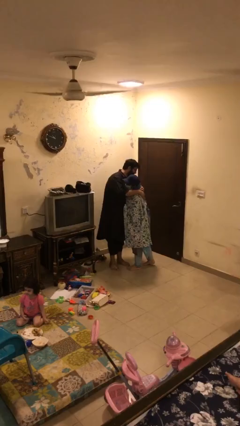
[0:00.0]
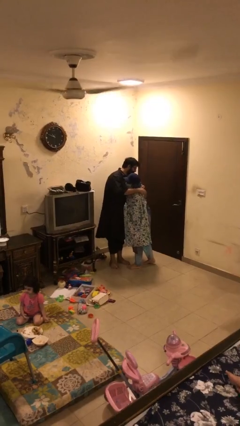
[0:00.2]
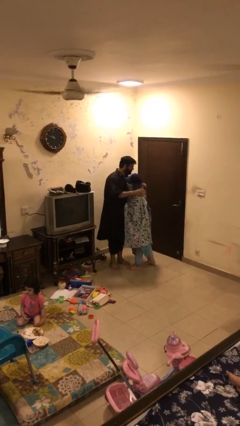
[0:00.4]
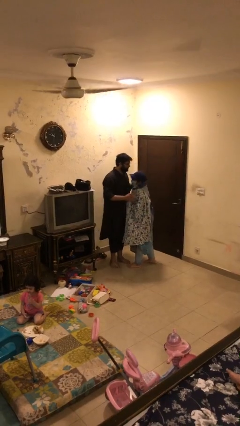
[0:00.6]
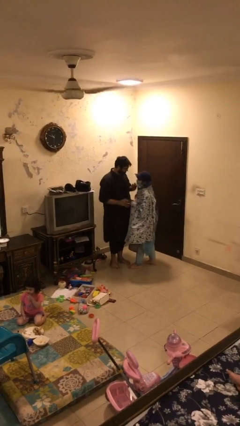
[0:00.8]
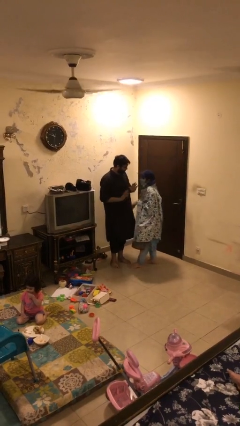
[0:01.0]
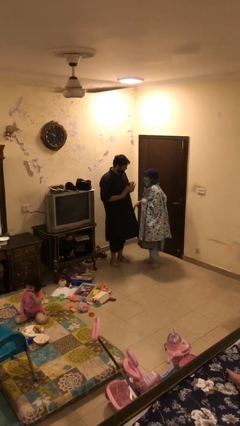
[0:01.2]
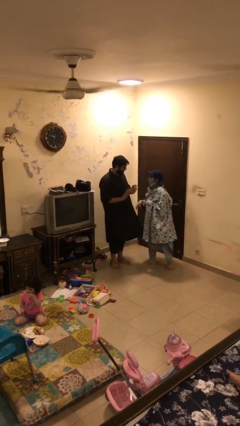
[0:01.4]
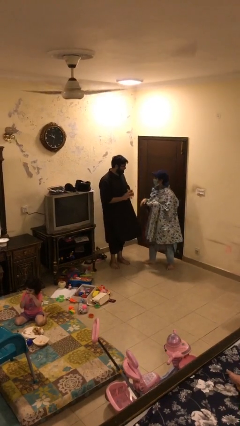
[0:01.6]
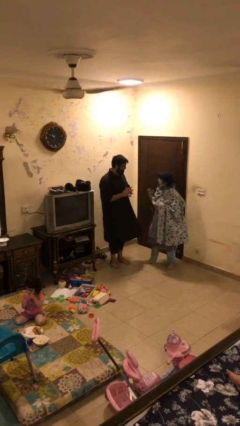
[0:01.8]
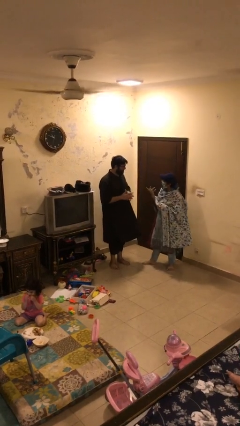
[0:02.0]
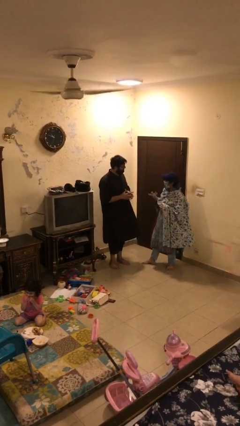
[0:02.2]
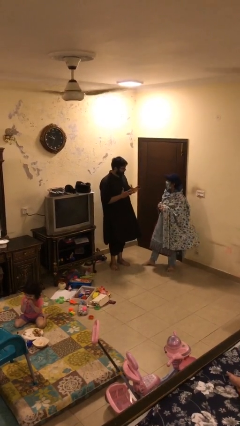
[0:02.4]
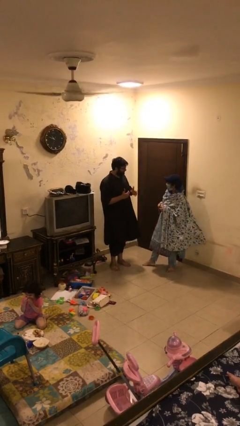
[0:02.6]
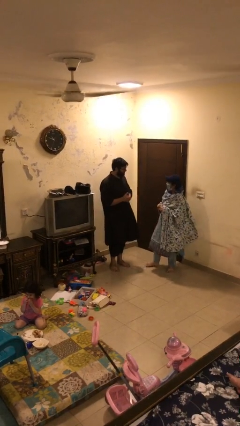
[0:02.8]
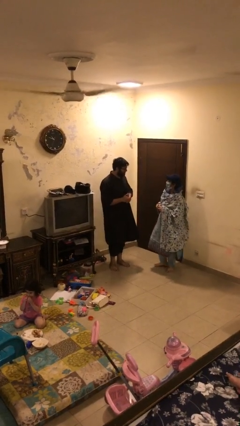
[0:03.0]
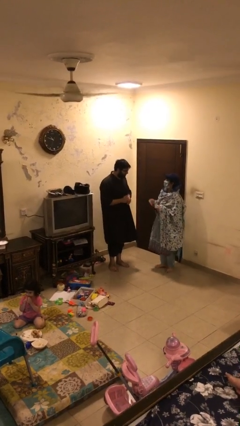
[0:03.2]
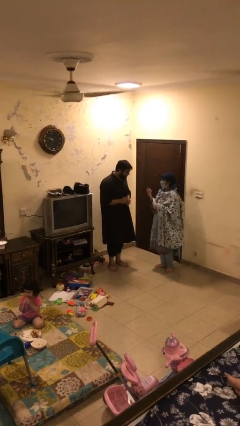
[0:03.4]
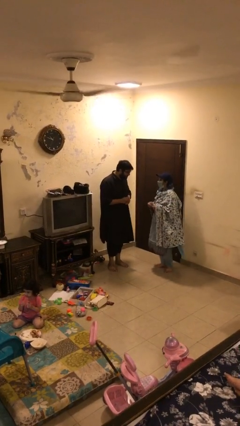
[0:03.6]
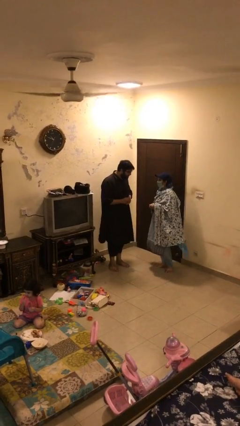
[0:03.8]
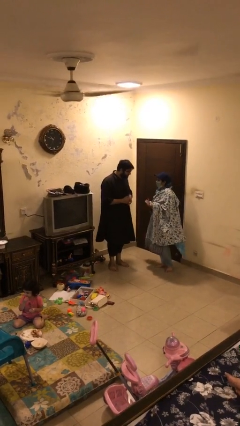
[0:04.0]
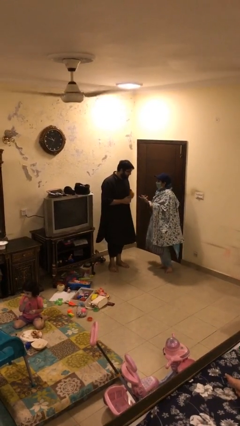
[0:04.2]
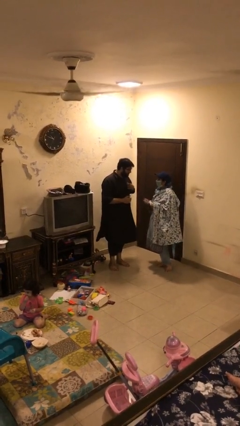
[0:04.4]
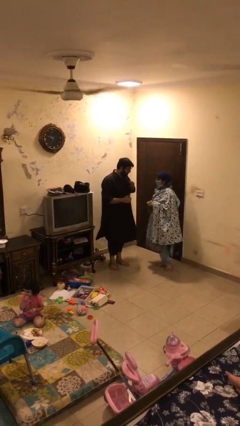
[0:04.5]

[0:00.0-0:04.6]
person talks to person

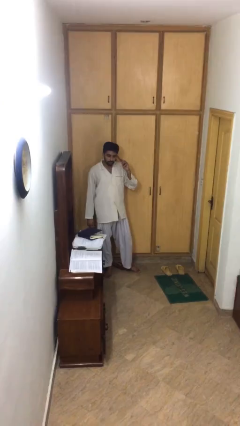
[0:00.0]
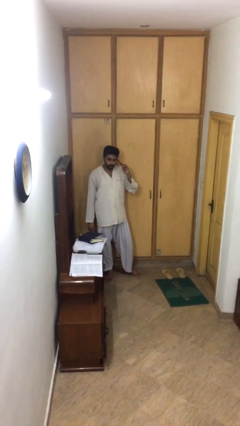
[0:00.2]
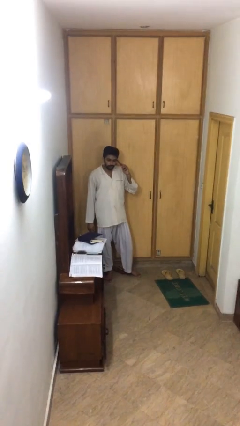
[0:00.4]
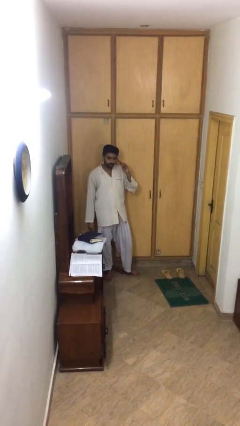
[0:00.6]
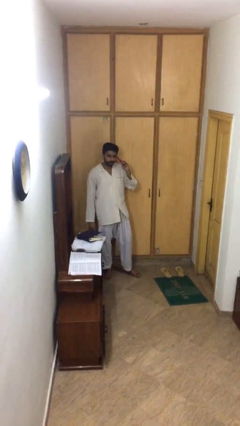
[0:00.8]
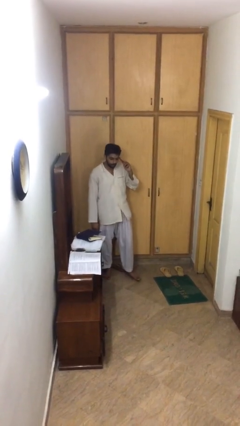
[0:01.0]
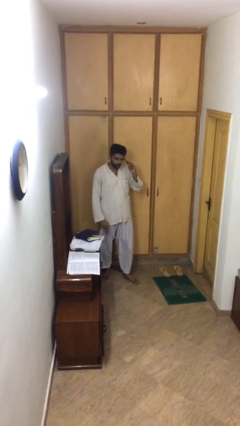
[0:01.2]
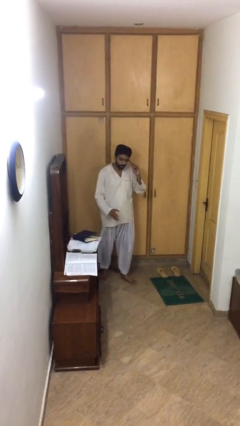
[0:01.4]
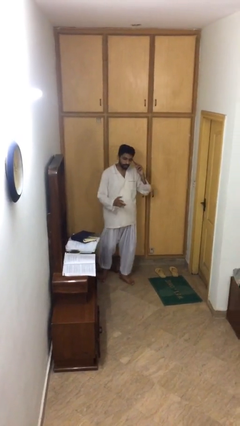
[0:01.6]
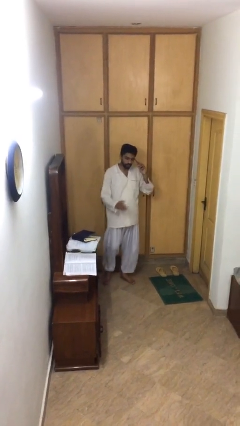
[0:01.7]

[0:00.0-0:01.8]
person talks on phone

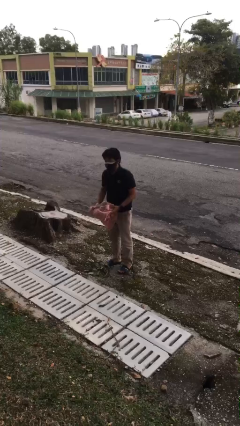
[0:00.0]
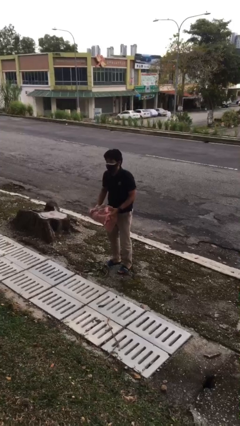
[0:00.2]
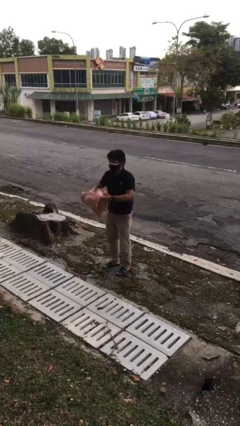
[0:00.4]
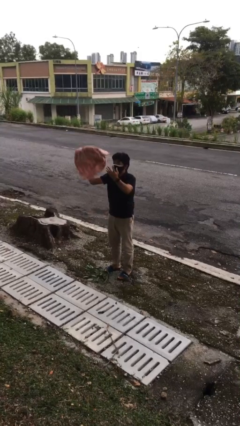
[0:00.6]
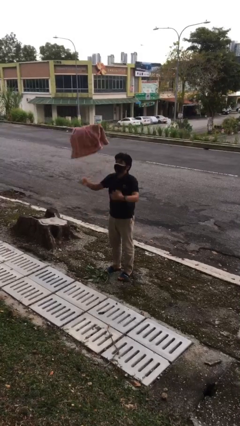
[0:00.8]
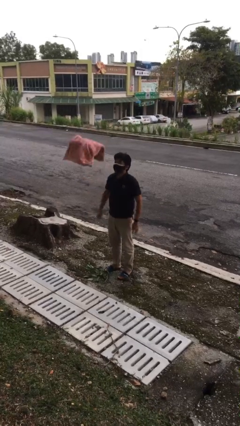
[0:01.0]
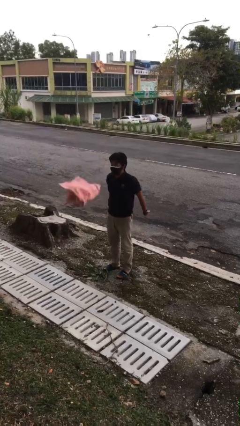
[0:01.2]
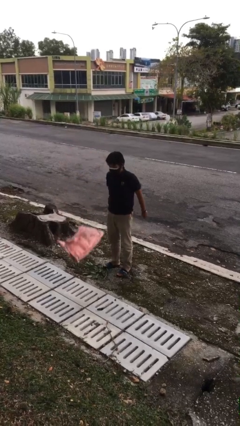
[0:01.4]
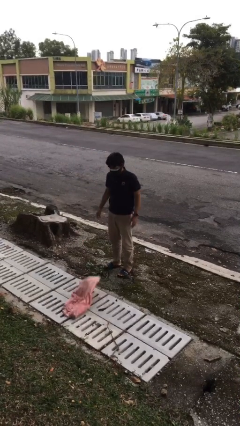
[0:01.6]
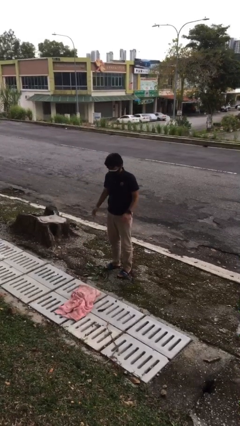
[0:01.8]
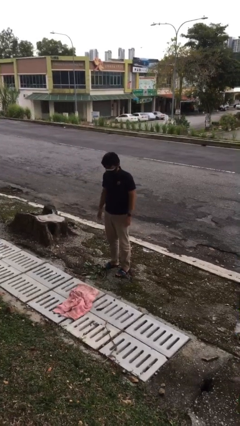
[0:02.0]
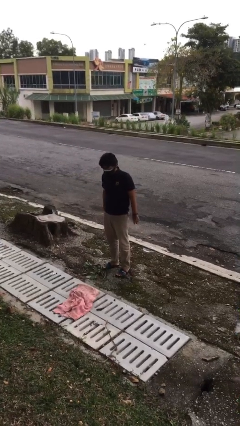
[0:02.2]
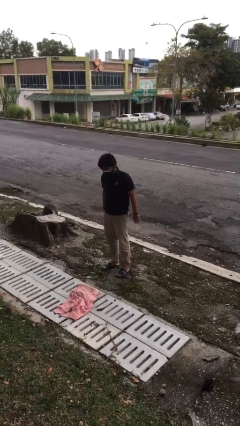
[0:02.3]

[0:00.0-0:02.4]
person throws object into air

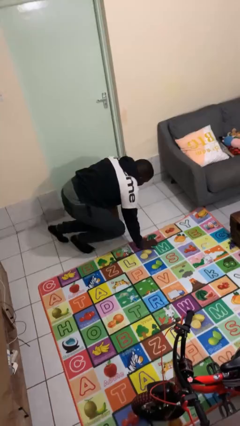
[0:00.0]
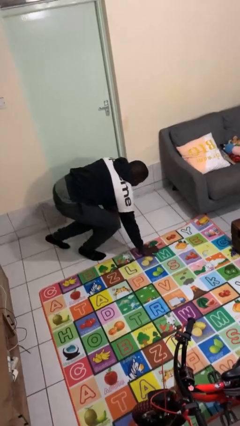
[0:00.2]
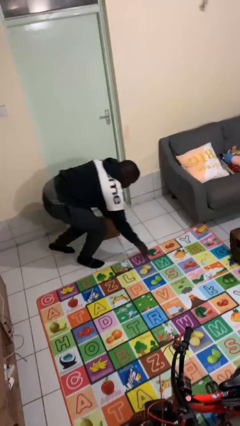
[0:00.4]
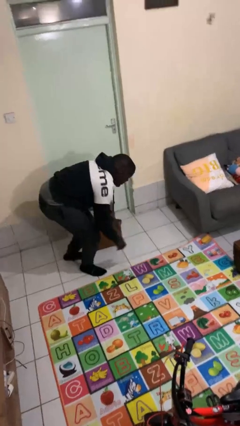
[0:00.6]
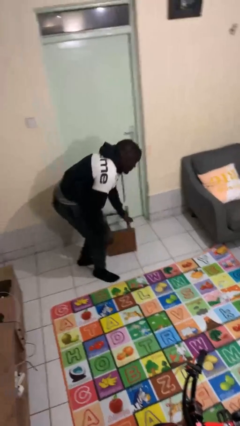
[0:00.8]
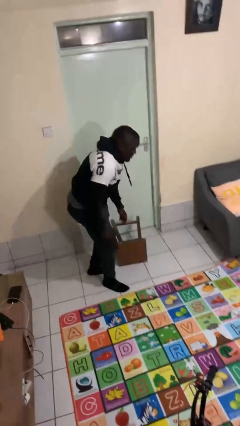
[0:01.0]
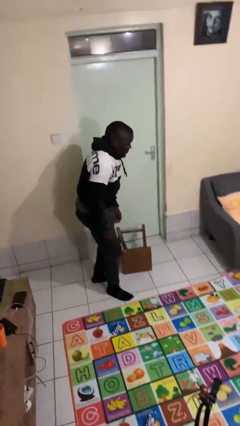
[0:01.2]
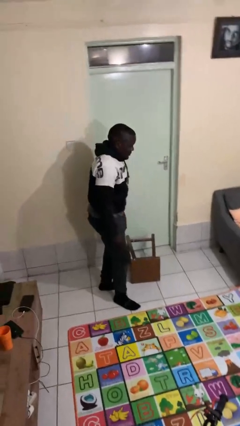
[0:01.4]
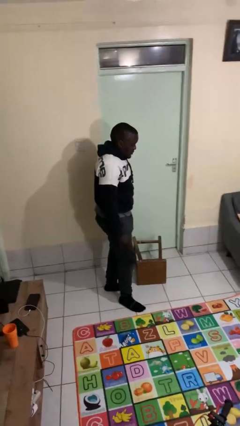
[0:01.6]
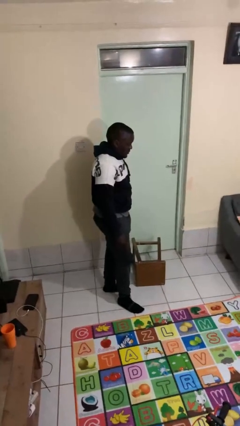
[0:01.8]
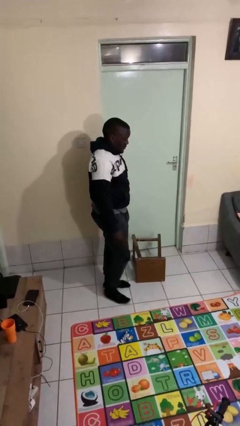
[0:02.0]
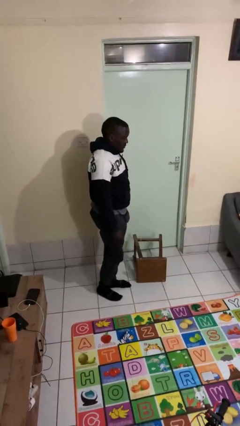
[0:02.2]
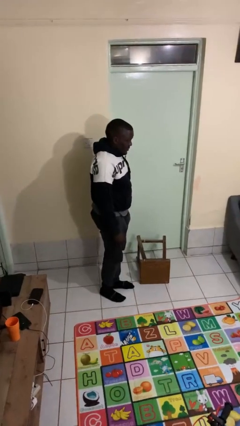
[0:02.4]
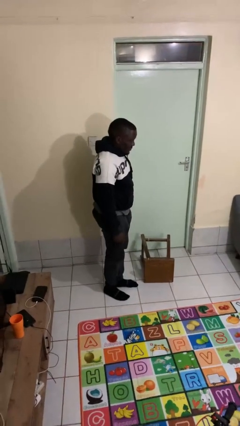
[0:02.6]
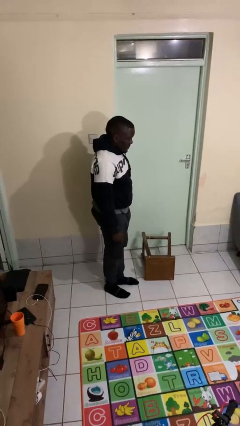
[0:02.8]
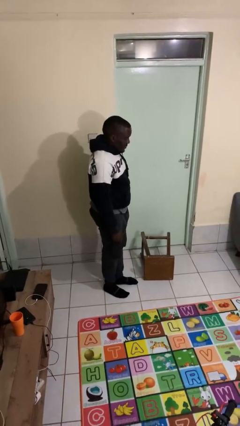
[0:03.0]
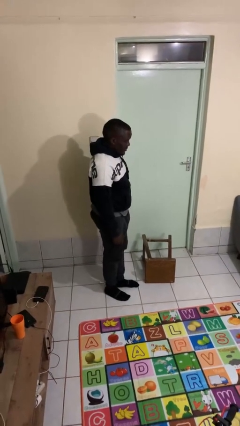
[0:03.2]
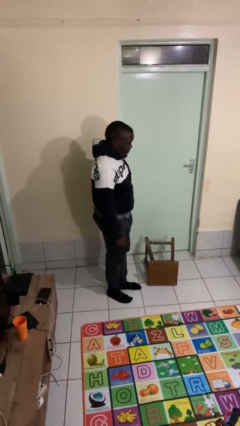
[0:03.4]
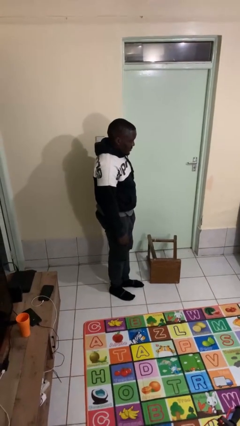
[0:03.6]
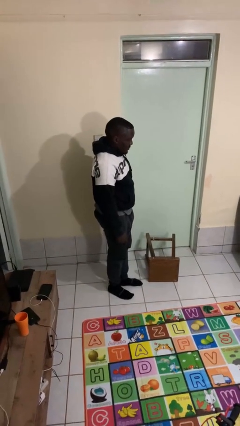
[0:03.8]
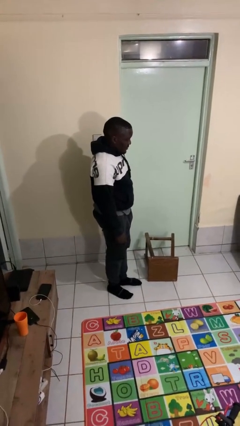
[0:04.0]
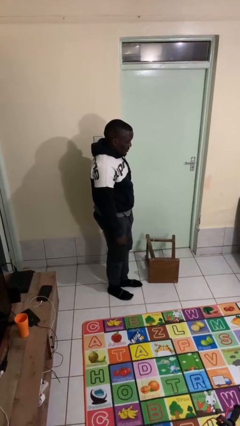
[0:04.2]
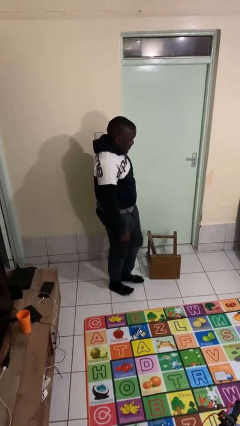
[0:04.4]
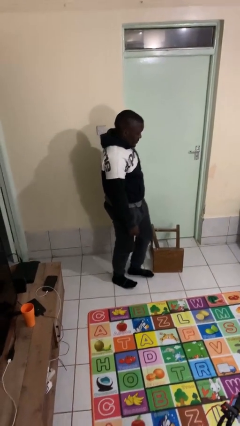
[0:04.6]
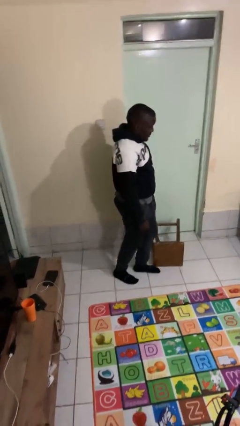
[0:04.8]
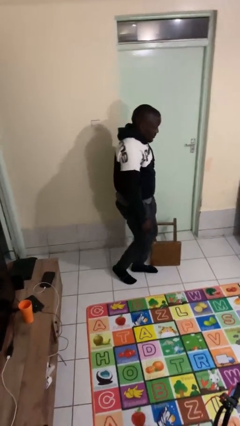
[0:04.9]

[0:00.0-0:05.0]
person stands up from floor

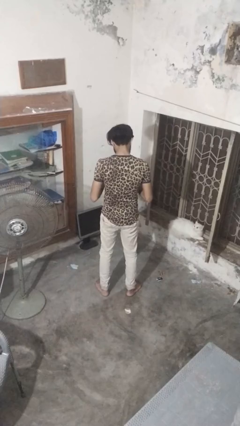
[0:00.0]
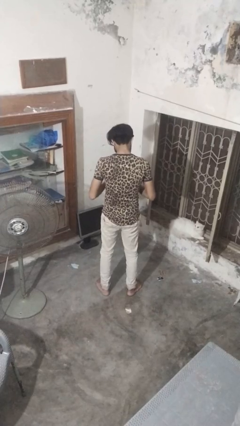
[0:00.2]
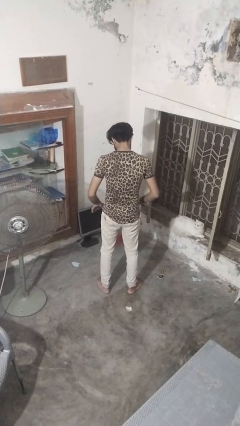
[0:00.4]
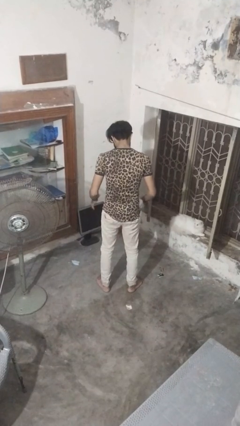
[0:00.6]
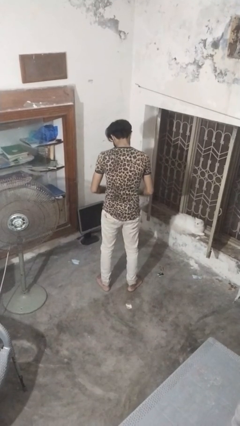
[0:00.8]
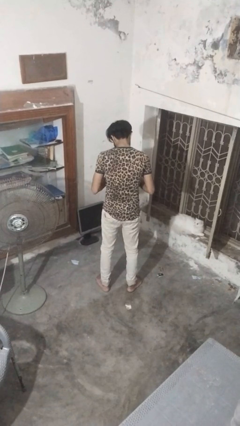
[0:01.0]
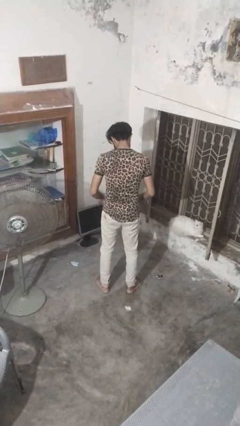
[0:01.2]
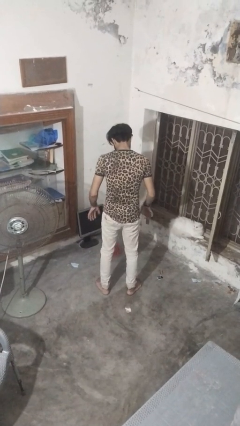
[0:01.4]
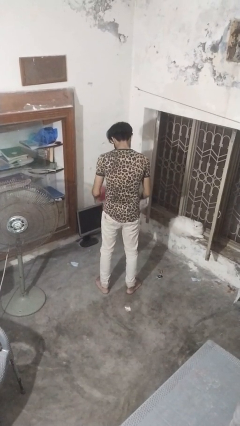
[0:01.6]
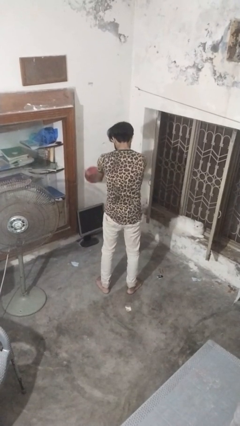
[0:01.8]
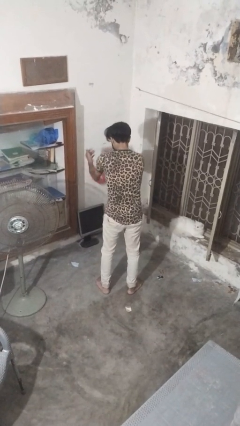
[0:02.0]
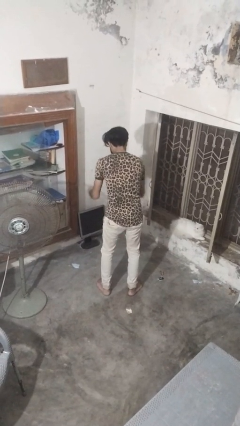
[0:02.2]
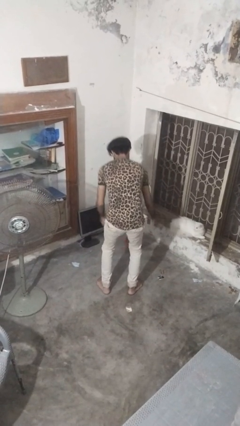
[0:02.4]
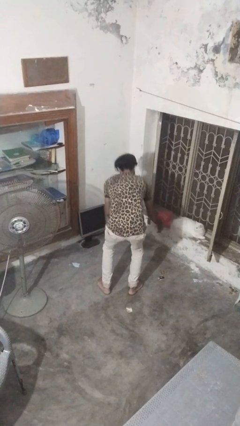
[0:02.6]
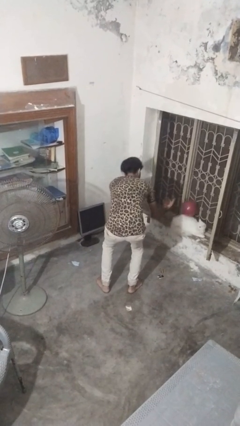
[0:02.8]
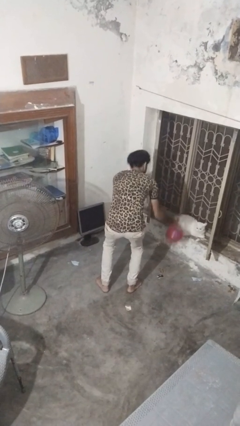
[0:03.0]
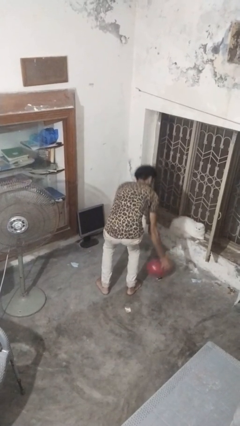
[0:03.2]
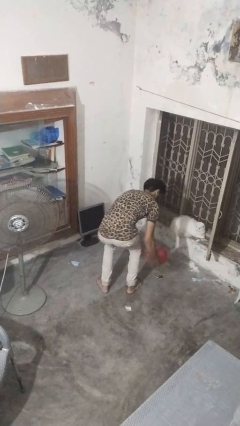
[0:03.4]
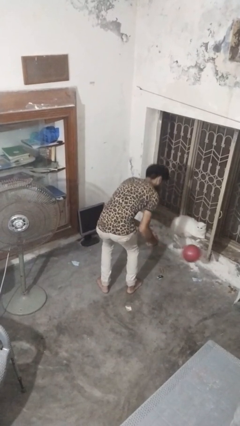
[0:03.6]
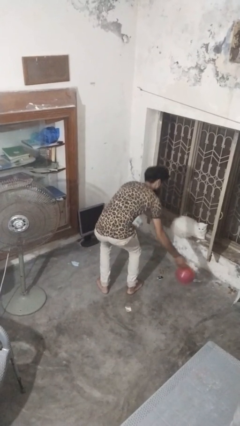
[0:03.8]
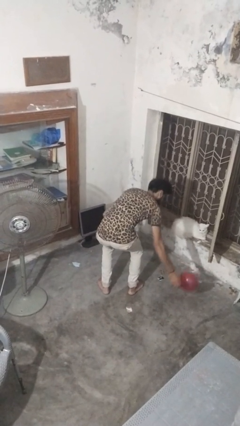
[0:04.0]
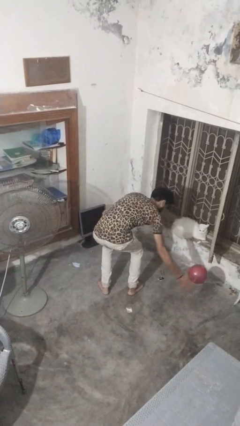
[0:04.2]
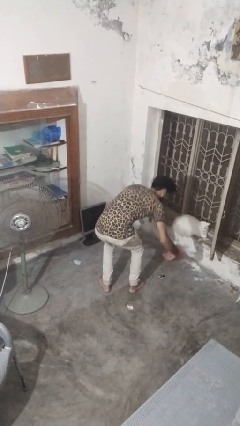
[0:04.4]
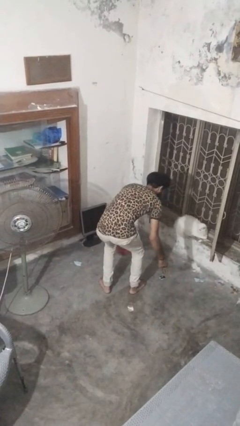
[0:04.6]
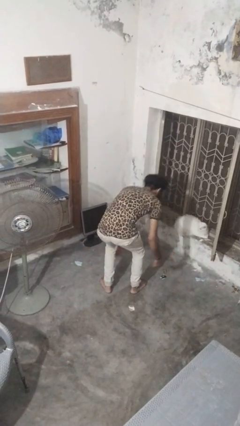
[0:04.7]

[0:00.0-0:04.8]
person bounces ball on floor
